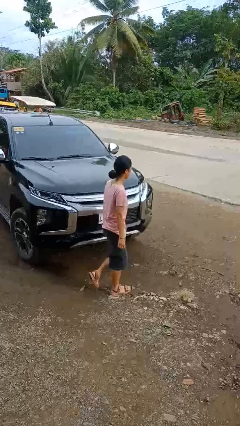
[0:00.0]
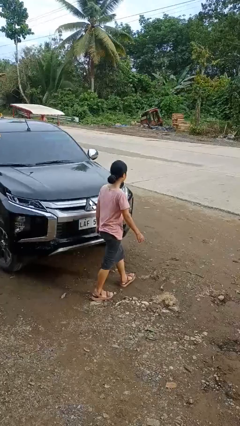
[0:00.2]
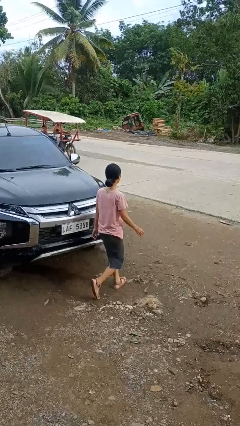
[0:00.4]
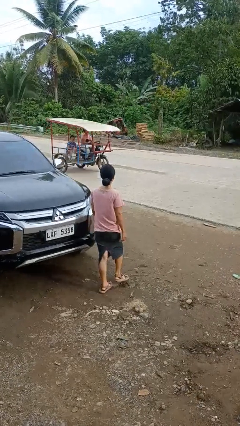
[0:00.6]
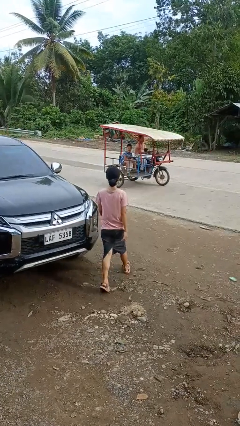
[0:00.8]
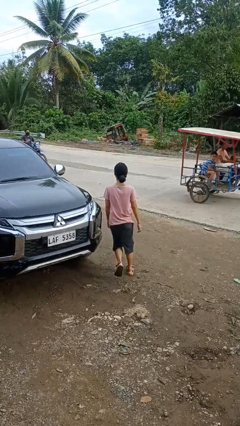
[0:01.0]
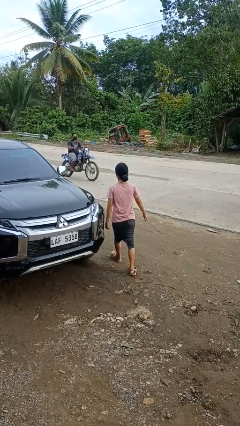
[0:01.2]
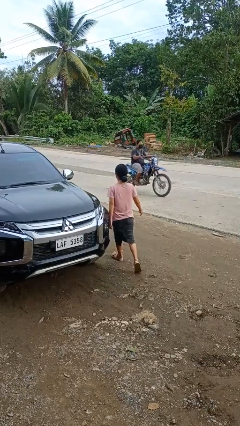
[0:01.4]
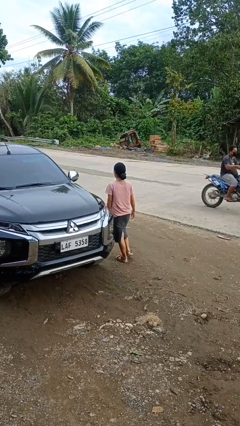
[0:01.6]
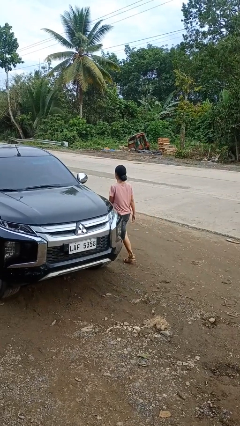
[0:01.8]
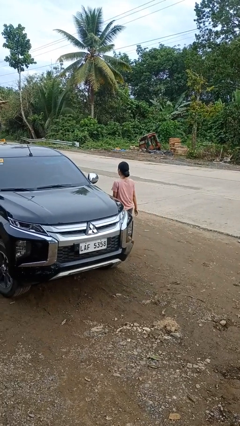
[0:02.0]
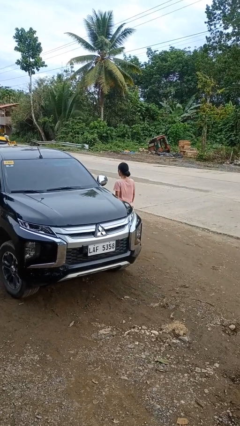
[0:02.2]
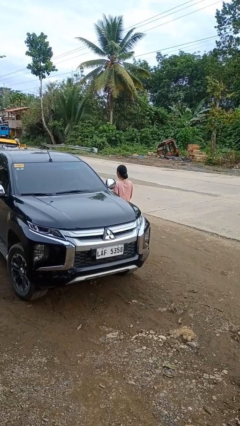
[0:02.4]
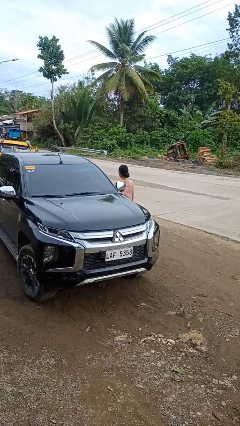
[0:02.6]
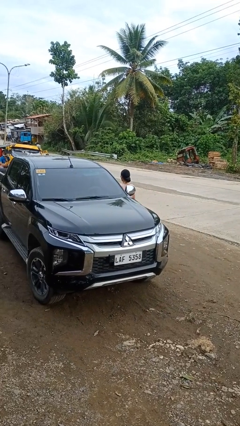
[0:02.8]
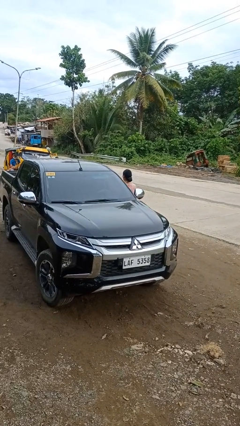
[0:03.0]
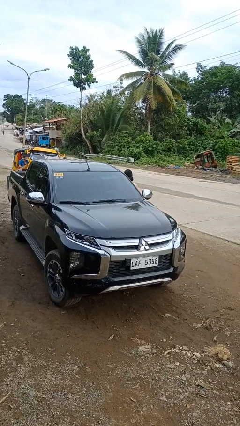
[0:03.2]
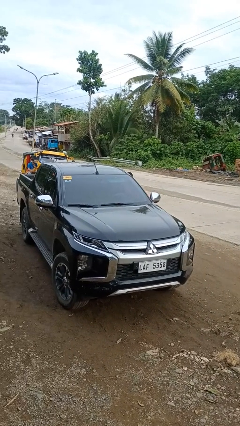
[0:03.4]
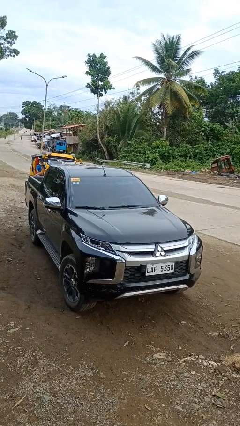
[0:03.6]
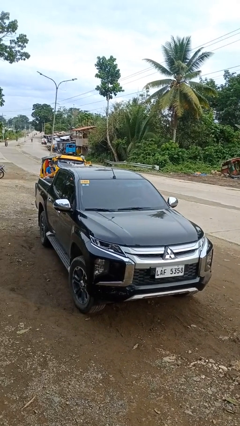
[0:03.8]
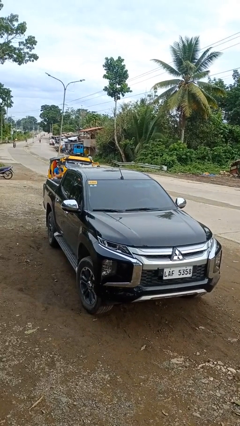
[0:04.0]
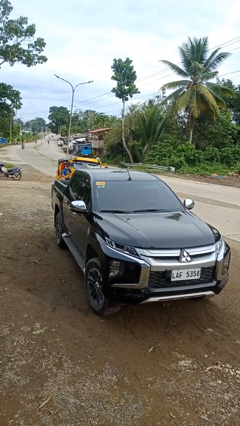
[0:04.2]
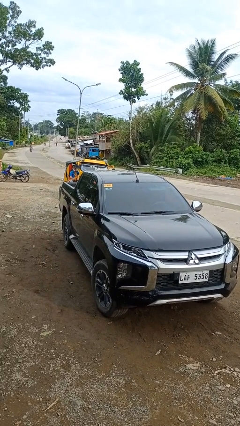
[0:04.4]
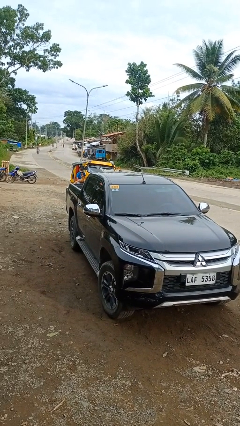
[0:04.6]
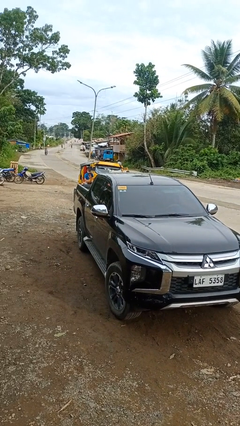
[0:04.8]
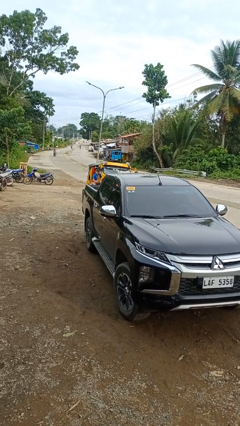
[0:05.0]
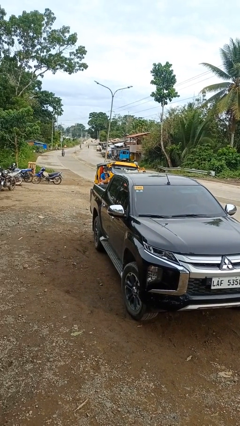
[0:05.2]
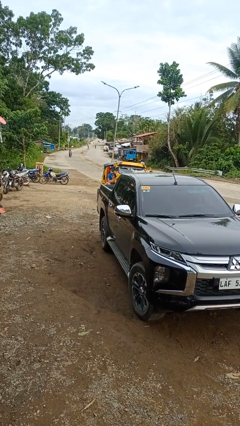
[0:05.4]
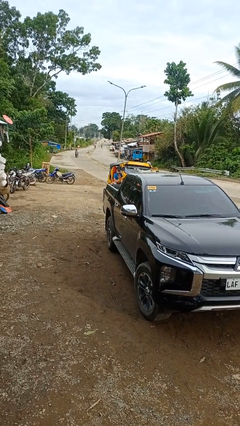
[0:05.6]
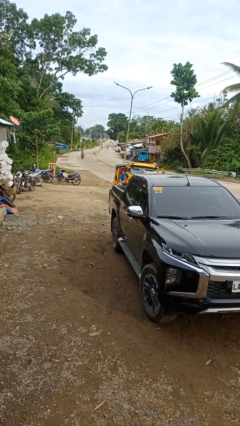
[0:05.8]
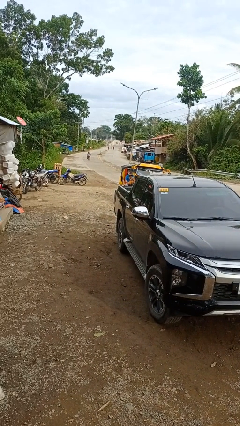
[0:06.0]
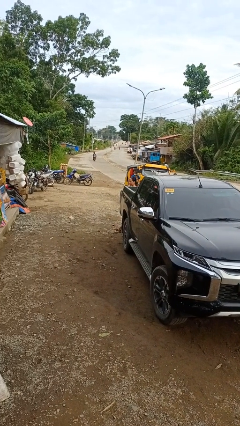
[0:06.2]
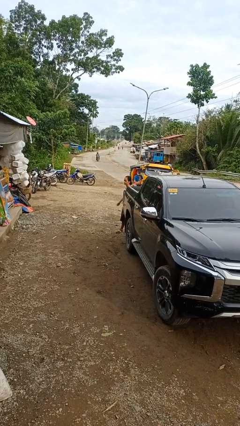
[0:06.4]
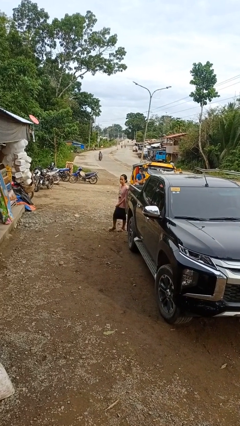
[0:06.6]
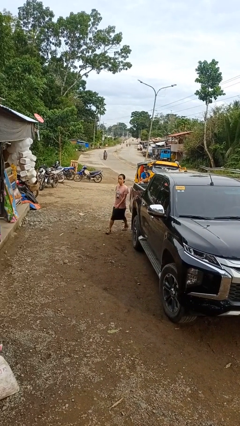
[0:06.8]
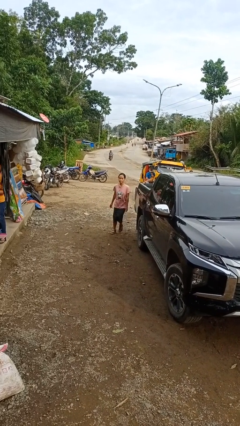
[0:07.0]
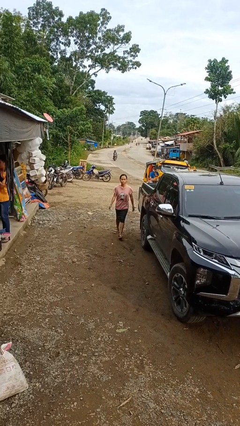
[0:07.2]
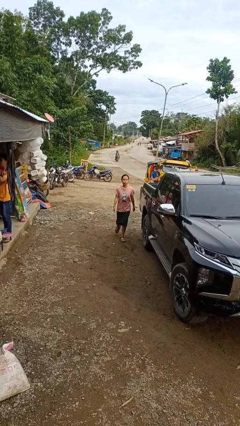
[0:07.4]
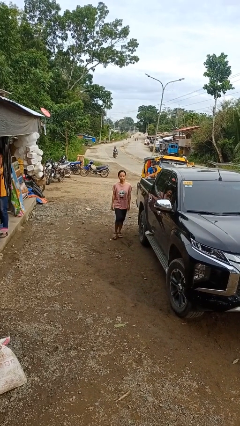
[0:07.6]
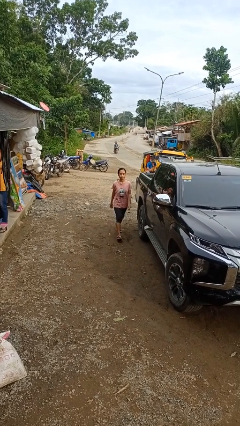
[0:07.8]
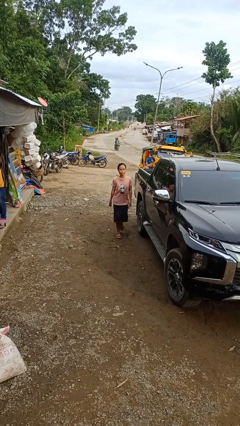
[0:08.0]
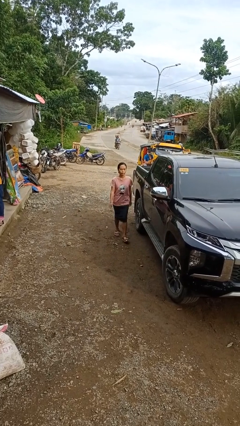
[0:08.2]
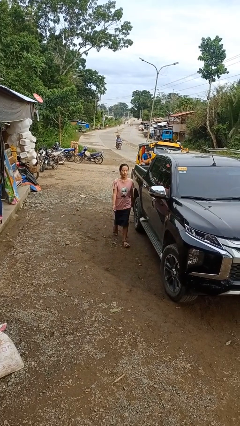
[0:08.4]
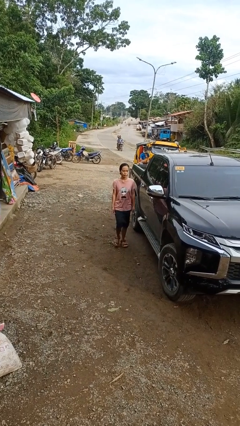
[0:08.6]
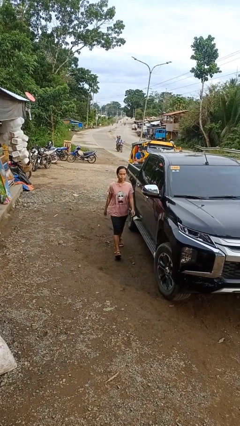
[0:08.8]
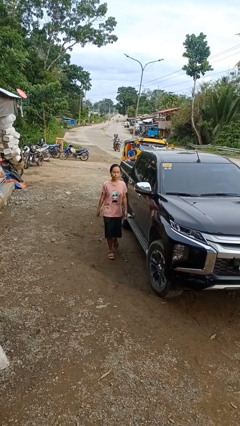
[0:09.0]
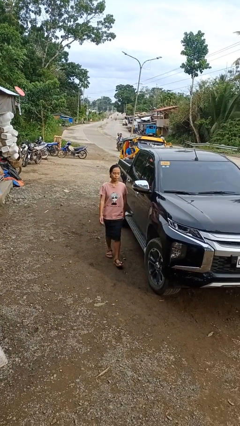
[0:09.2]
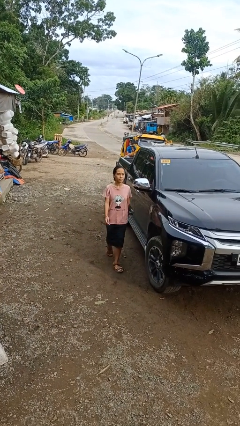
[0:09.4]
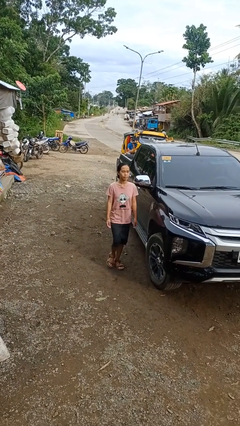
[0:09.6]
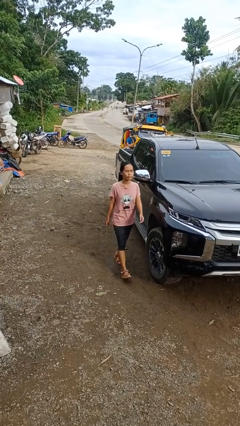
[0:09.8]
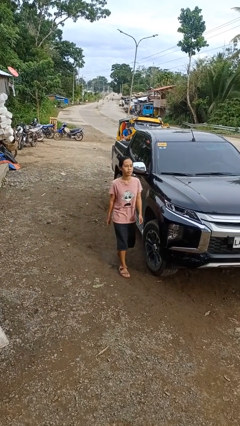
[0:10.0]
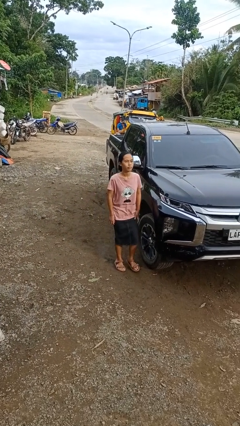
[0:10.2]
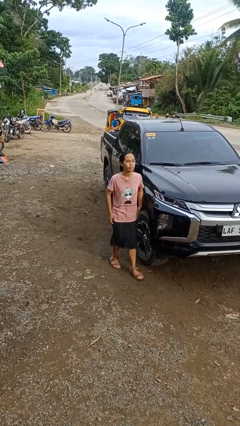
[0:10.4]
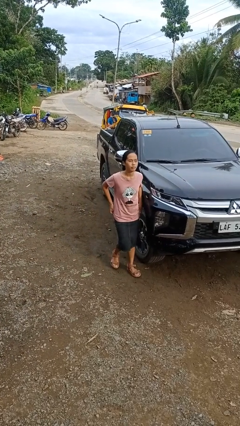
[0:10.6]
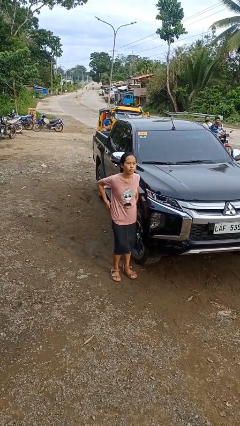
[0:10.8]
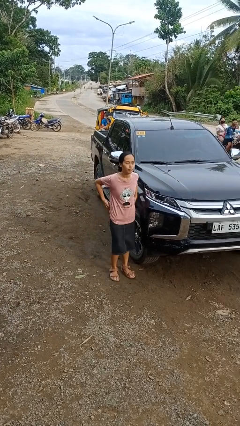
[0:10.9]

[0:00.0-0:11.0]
person walks around car

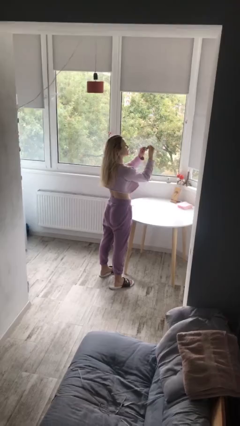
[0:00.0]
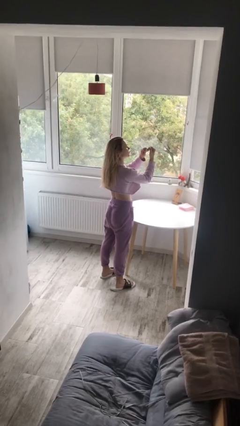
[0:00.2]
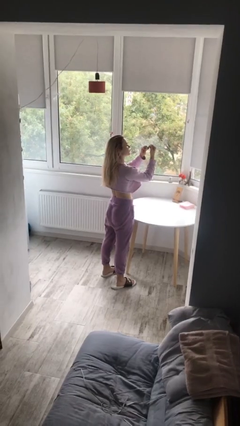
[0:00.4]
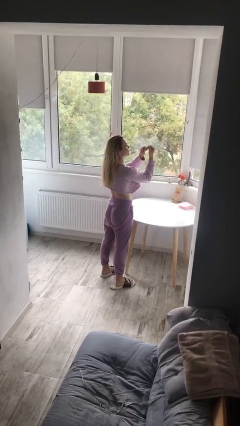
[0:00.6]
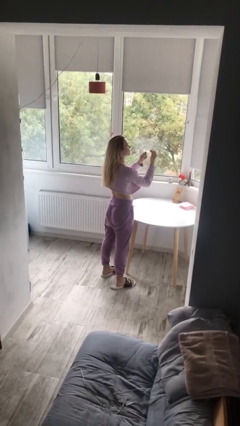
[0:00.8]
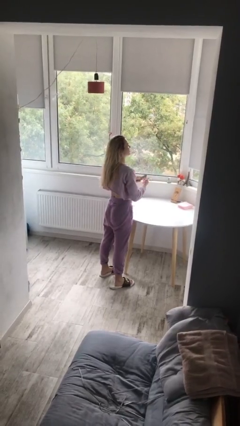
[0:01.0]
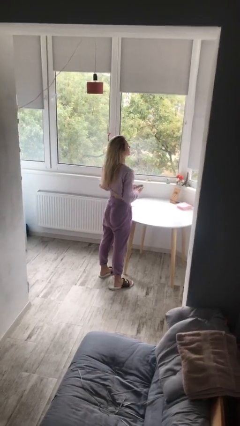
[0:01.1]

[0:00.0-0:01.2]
person files fingernails

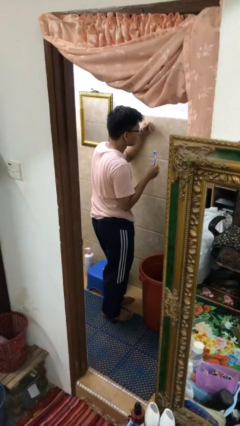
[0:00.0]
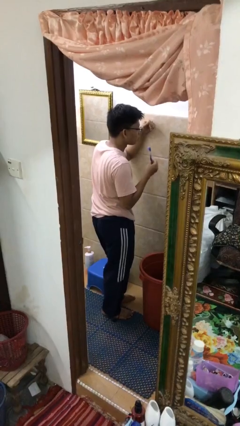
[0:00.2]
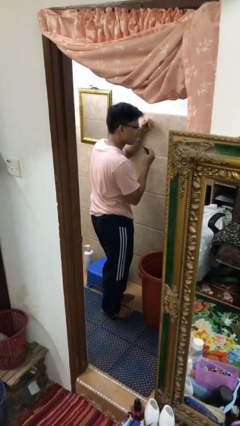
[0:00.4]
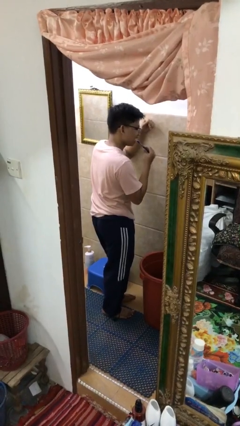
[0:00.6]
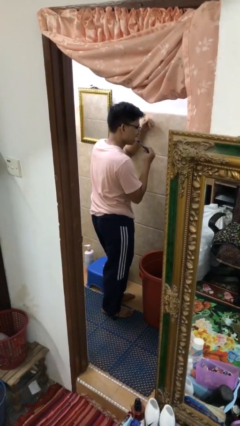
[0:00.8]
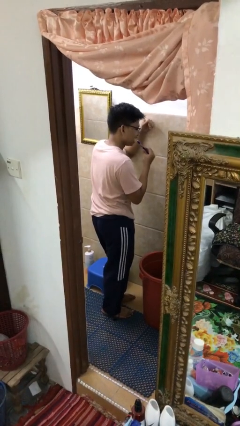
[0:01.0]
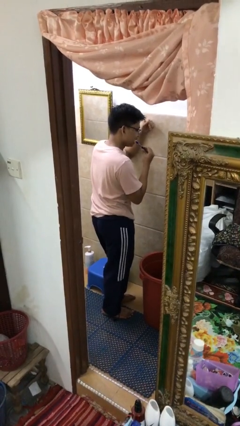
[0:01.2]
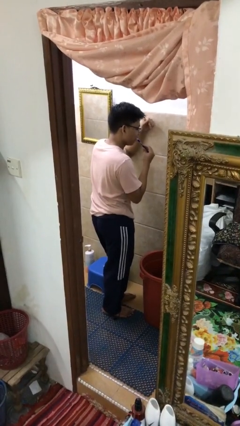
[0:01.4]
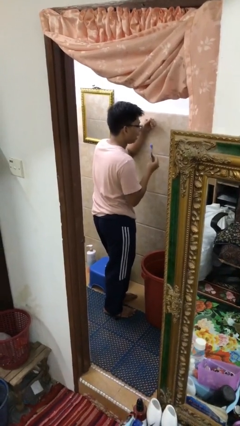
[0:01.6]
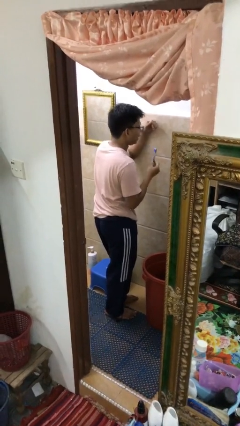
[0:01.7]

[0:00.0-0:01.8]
person brushes teeth

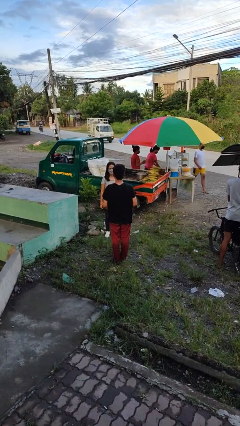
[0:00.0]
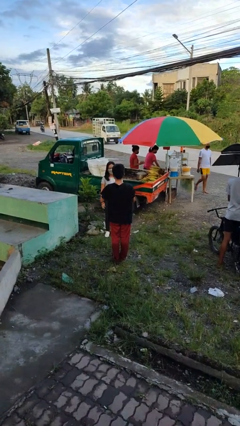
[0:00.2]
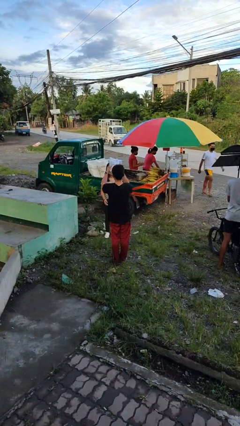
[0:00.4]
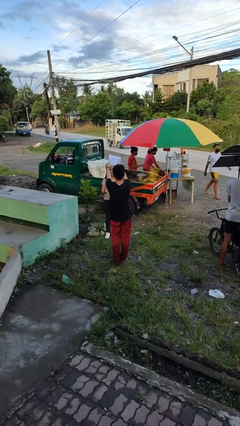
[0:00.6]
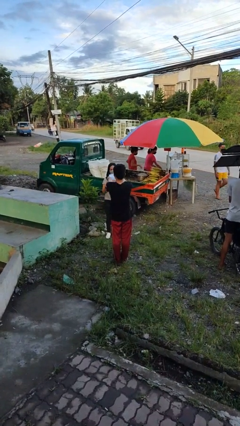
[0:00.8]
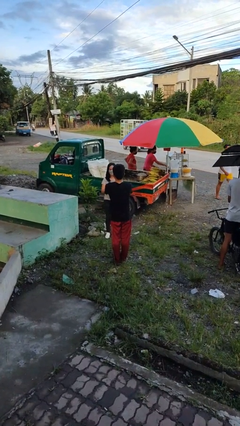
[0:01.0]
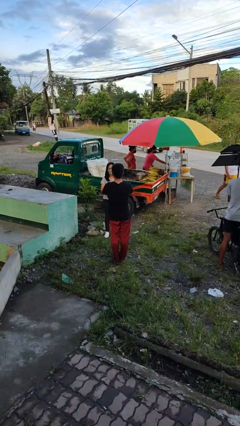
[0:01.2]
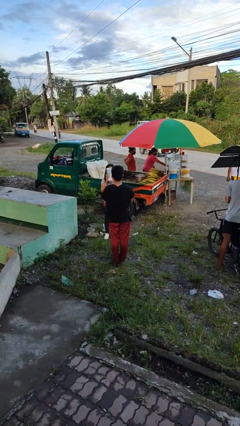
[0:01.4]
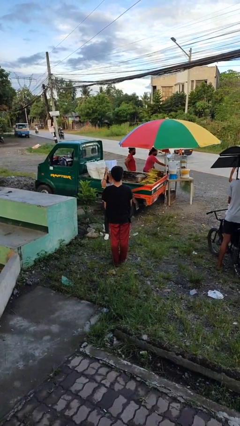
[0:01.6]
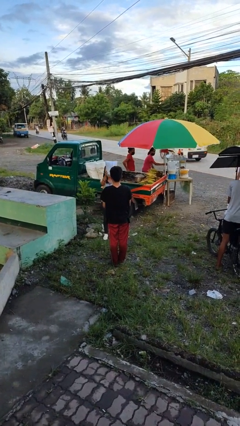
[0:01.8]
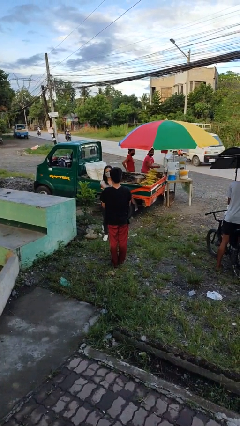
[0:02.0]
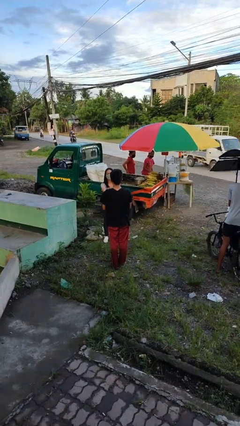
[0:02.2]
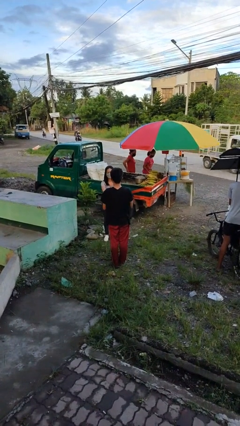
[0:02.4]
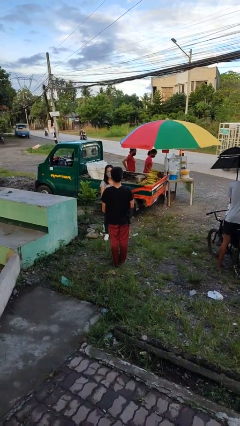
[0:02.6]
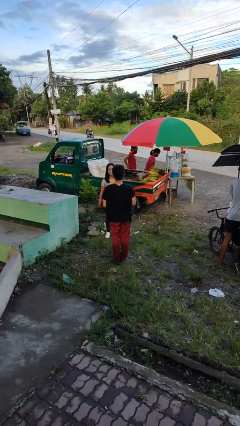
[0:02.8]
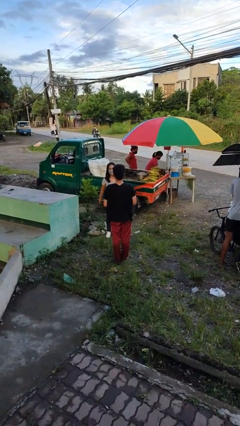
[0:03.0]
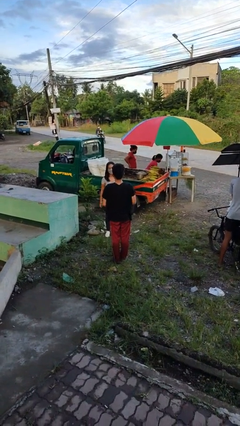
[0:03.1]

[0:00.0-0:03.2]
person transfers object to person

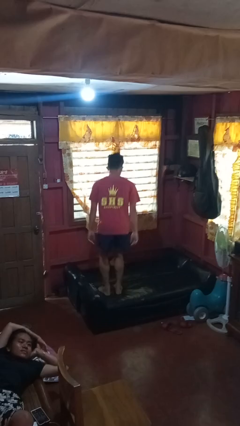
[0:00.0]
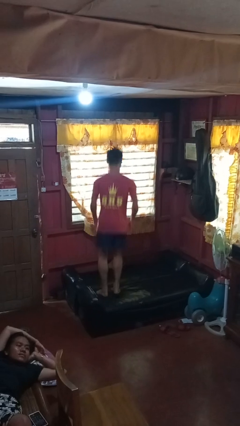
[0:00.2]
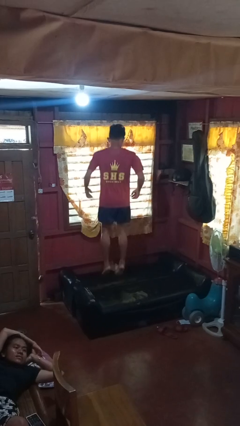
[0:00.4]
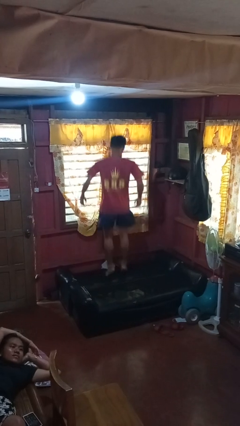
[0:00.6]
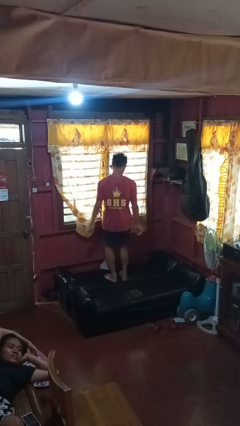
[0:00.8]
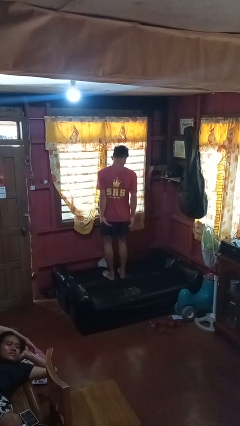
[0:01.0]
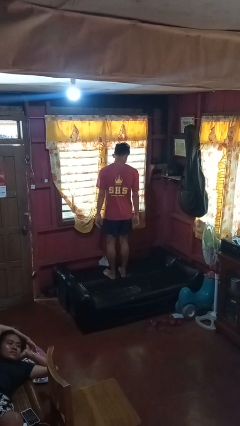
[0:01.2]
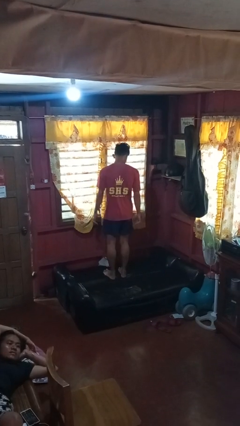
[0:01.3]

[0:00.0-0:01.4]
person jumps on couch
